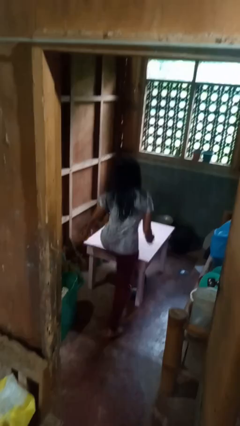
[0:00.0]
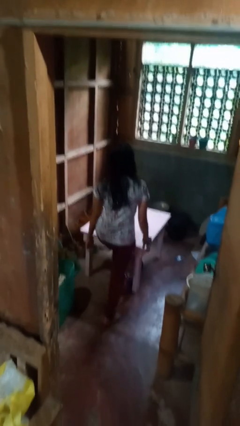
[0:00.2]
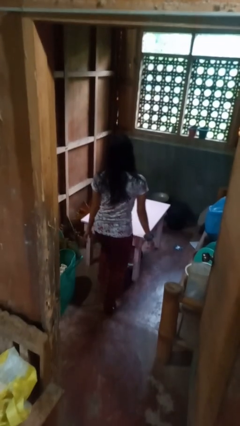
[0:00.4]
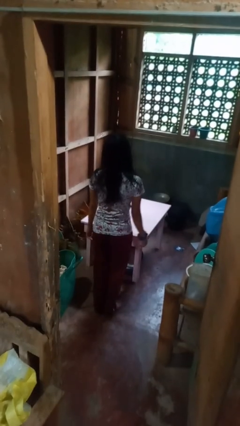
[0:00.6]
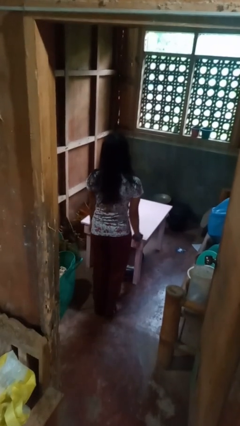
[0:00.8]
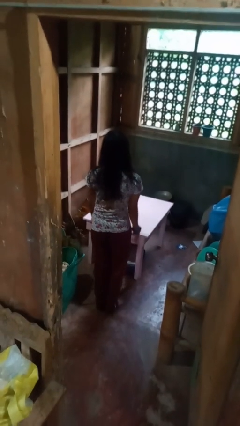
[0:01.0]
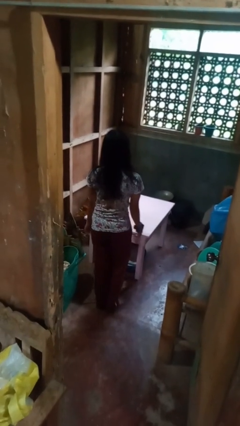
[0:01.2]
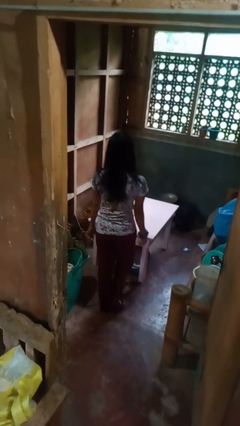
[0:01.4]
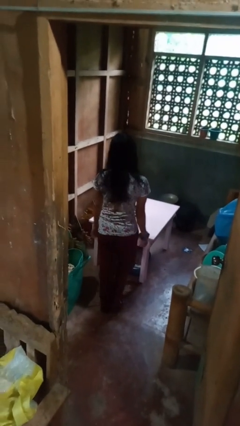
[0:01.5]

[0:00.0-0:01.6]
person climbs off table

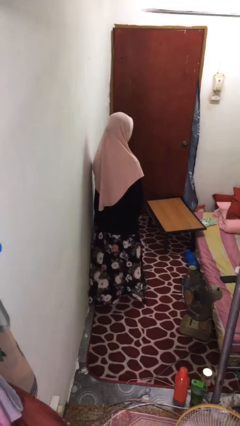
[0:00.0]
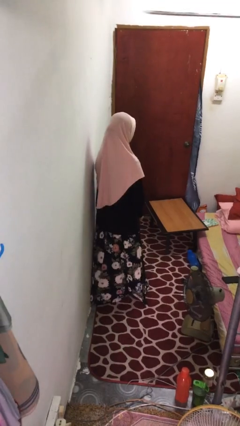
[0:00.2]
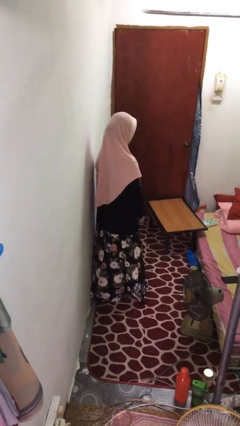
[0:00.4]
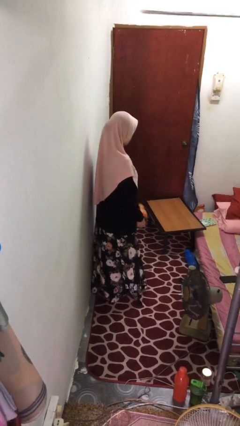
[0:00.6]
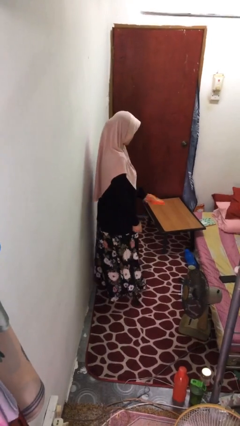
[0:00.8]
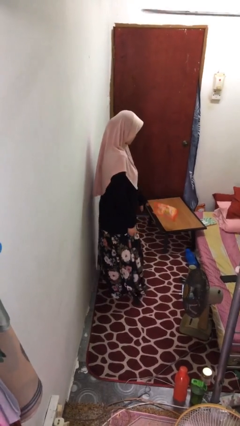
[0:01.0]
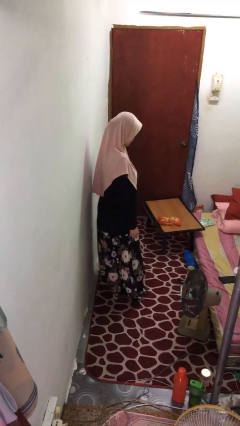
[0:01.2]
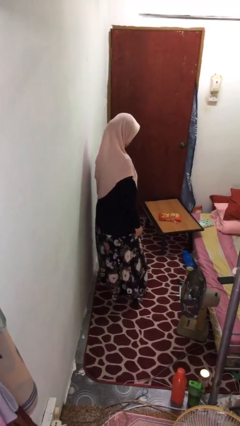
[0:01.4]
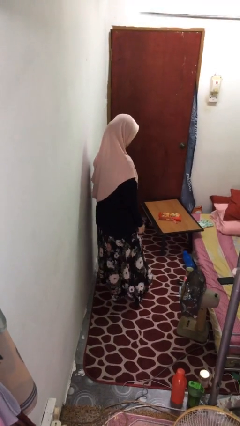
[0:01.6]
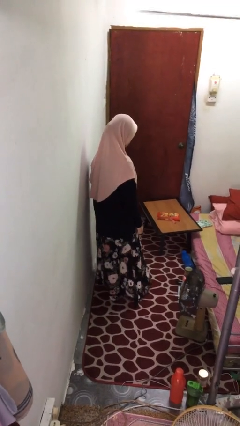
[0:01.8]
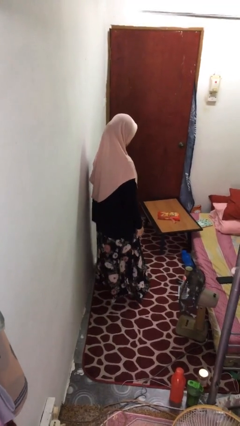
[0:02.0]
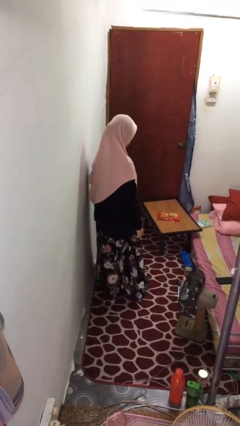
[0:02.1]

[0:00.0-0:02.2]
person throws object on table

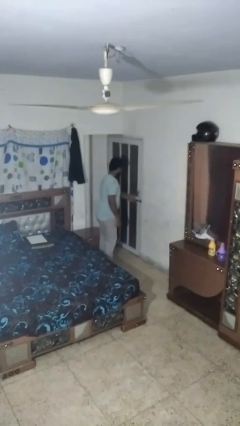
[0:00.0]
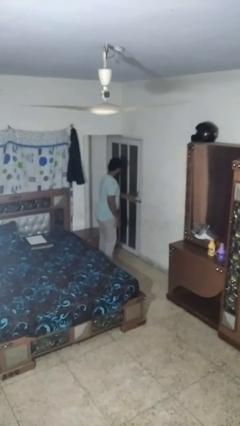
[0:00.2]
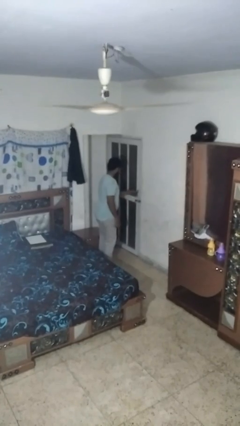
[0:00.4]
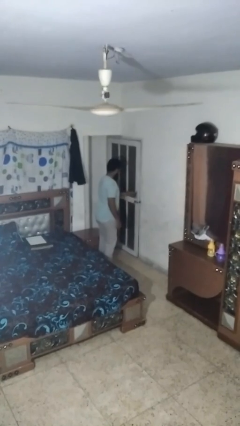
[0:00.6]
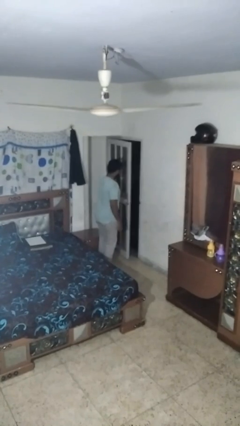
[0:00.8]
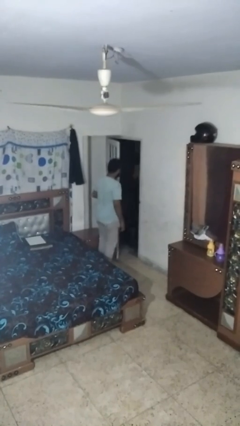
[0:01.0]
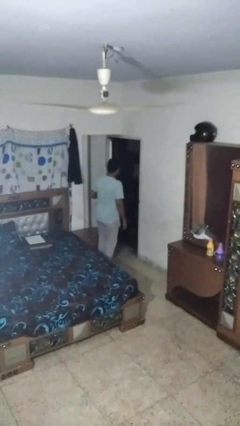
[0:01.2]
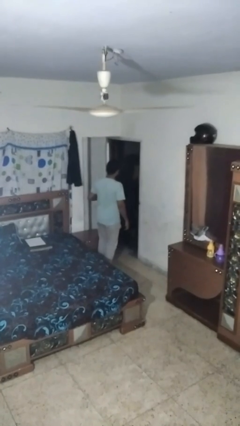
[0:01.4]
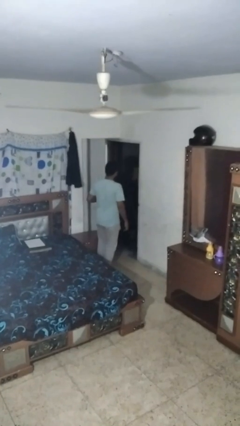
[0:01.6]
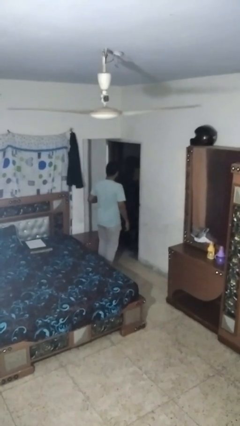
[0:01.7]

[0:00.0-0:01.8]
person opens facility door

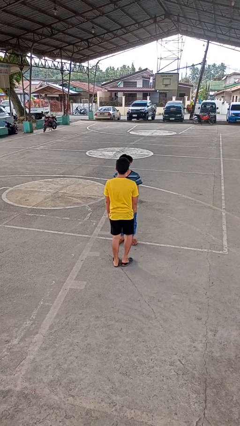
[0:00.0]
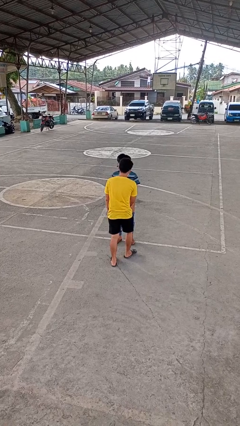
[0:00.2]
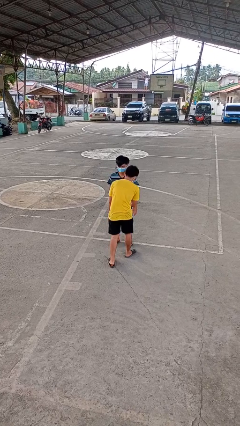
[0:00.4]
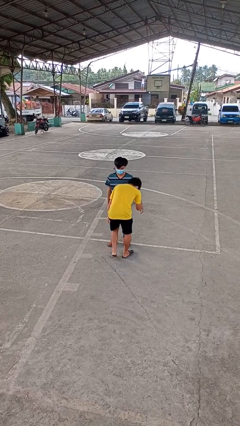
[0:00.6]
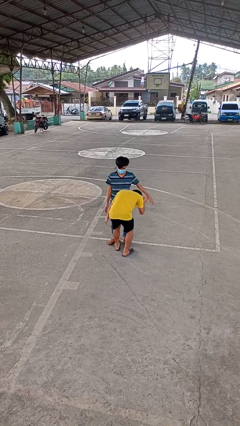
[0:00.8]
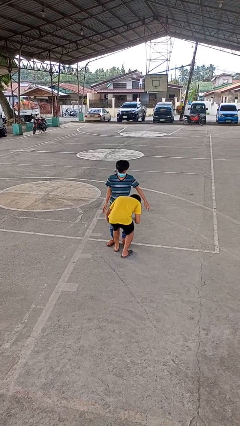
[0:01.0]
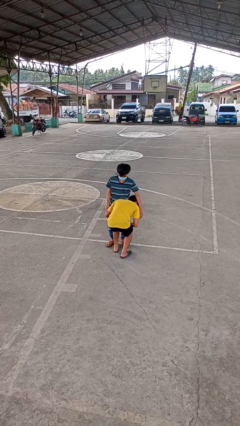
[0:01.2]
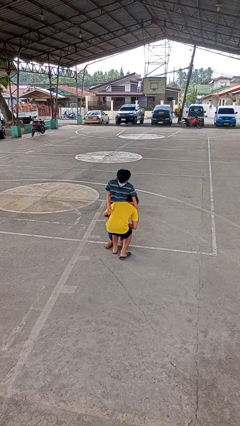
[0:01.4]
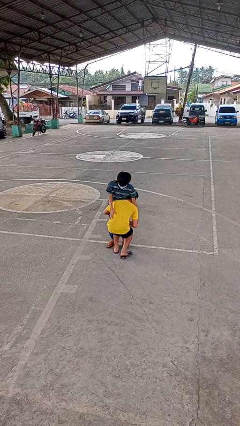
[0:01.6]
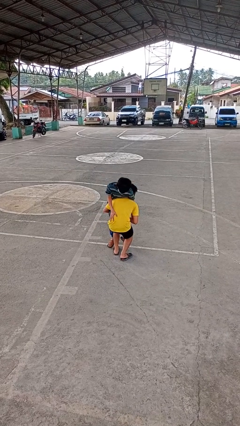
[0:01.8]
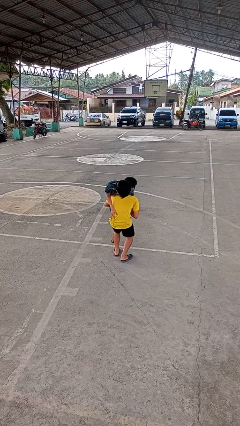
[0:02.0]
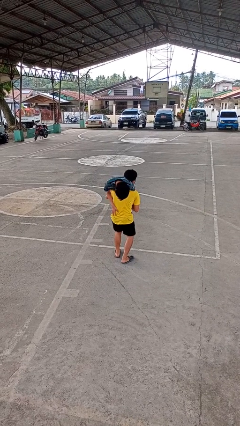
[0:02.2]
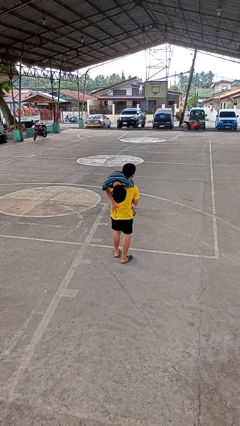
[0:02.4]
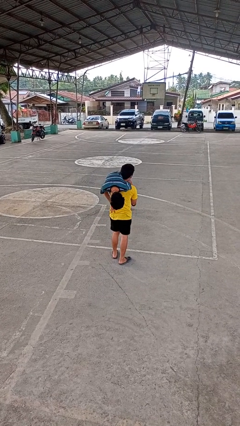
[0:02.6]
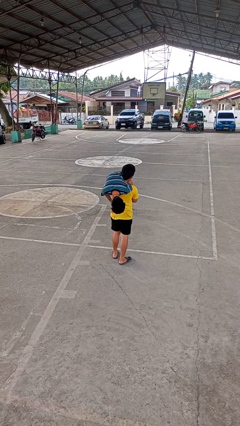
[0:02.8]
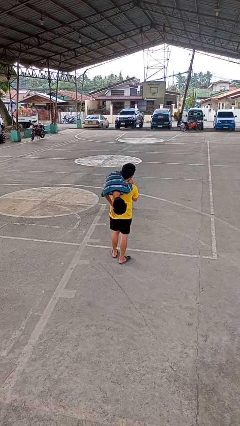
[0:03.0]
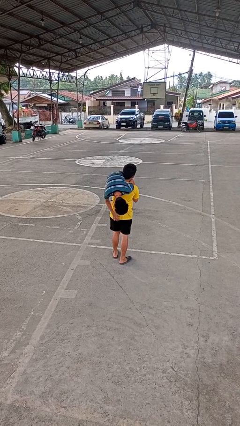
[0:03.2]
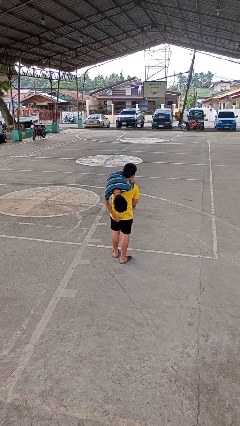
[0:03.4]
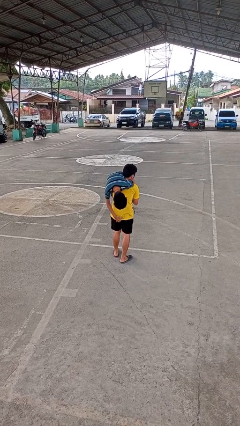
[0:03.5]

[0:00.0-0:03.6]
person carries person over shoulder

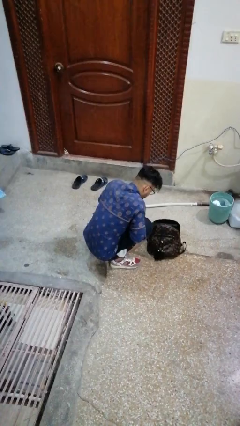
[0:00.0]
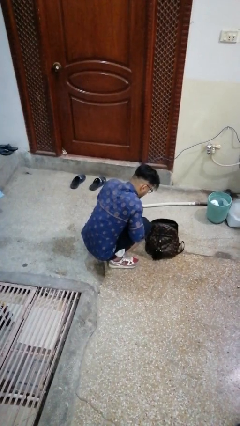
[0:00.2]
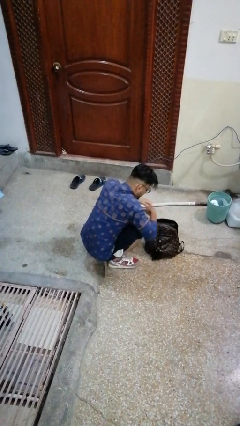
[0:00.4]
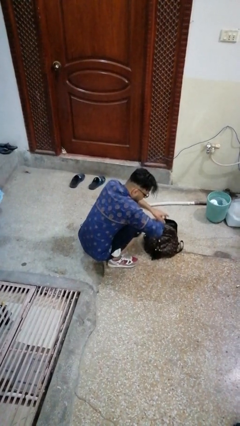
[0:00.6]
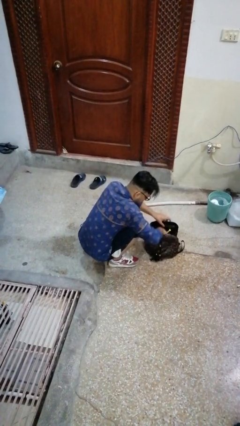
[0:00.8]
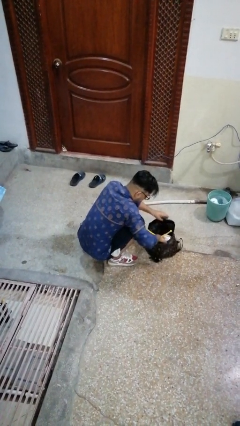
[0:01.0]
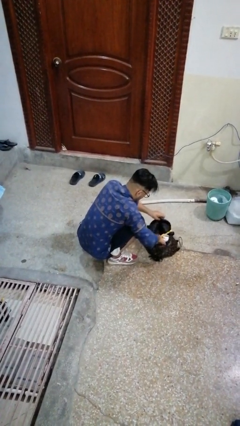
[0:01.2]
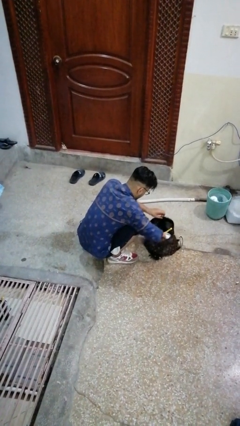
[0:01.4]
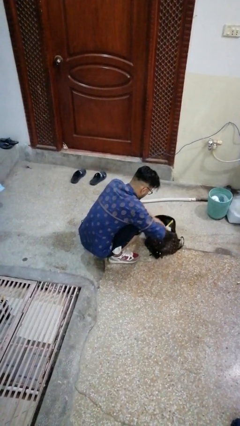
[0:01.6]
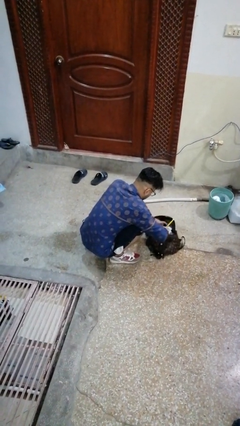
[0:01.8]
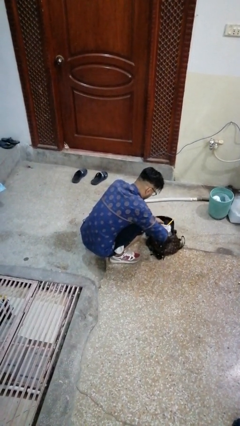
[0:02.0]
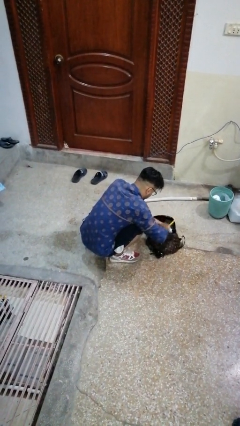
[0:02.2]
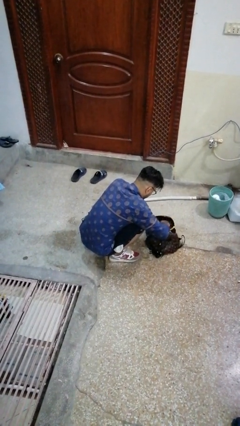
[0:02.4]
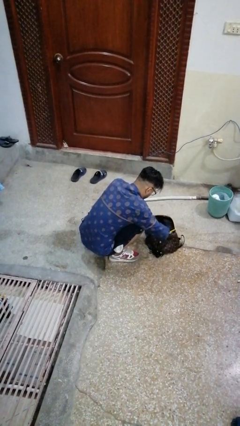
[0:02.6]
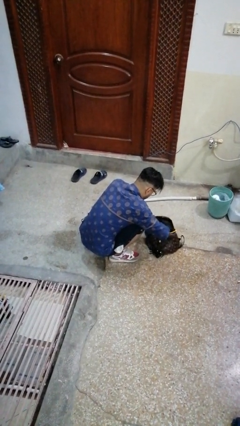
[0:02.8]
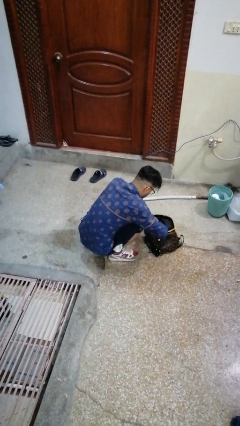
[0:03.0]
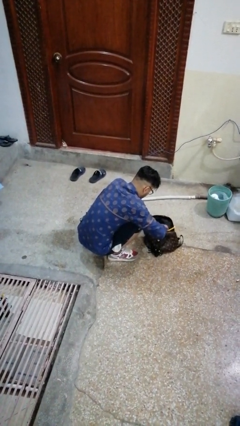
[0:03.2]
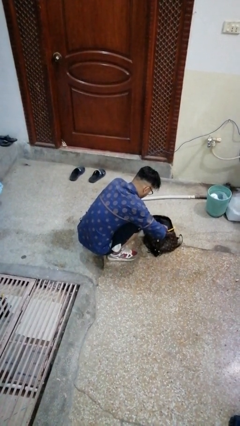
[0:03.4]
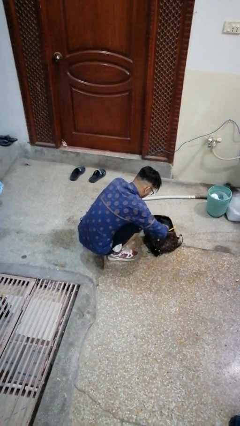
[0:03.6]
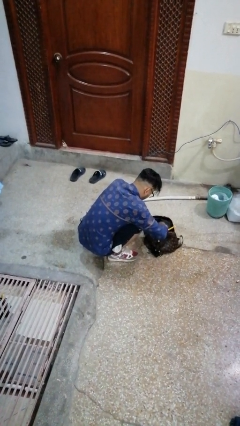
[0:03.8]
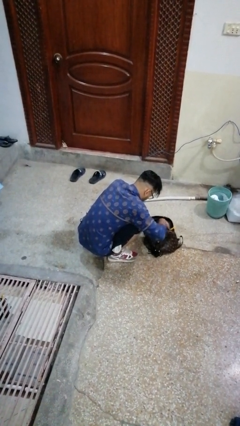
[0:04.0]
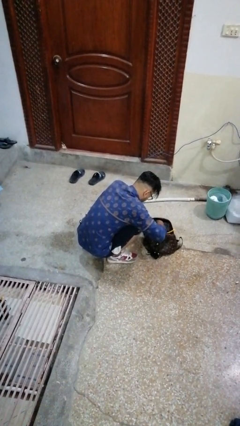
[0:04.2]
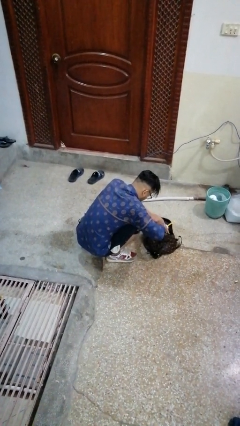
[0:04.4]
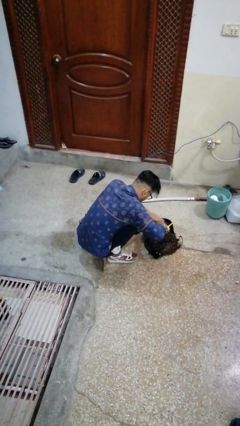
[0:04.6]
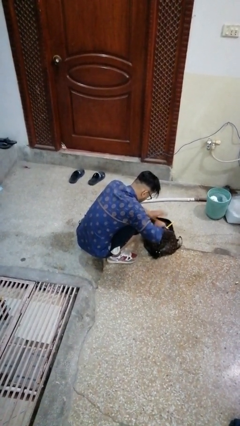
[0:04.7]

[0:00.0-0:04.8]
person searches in bag

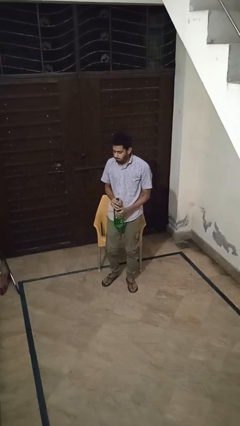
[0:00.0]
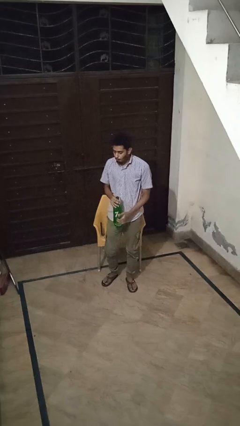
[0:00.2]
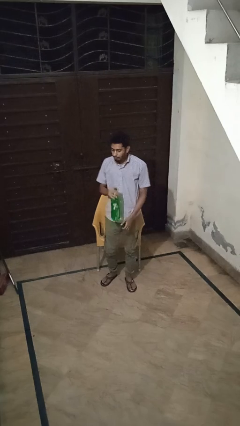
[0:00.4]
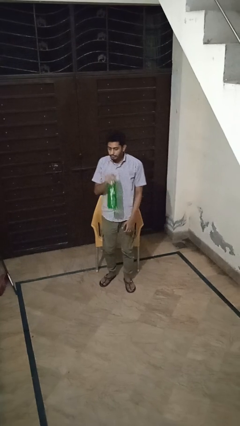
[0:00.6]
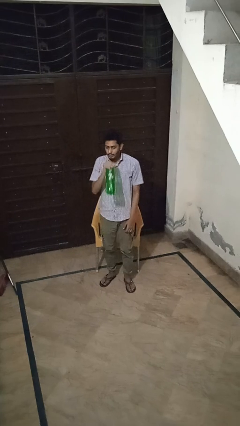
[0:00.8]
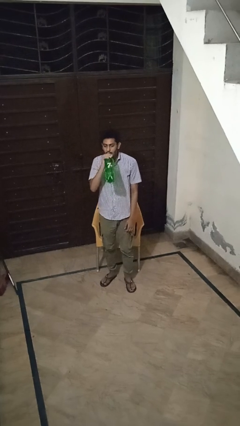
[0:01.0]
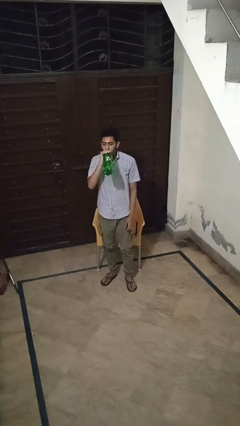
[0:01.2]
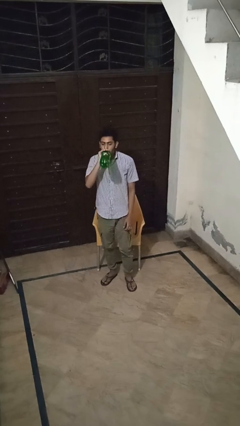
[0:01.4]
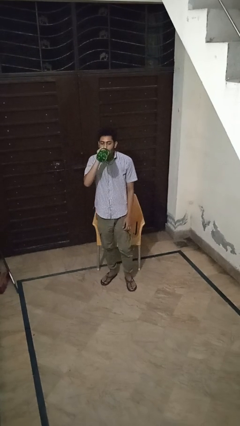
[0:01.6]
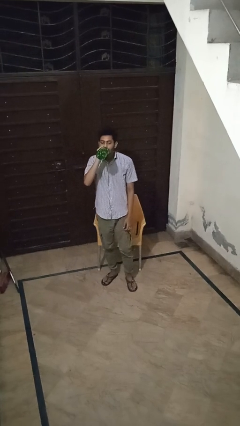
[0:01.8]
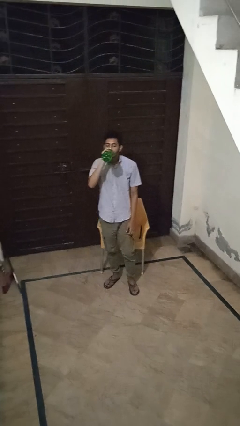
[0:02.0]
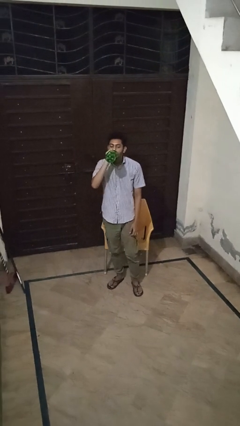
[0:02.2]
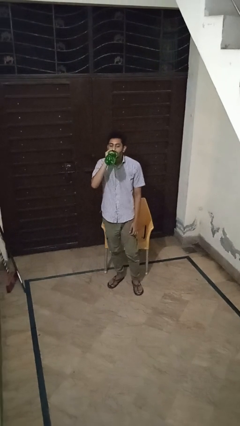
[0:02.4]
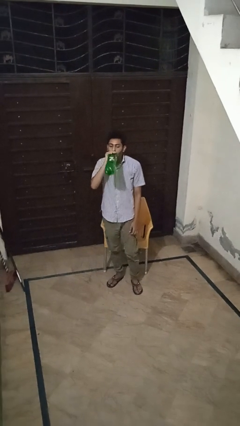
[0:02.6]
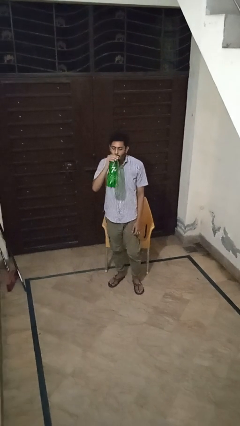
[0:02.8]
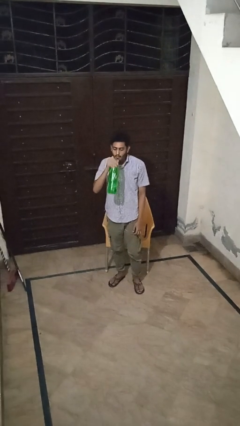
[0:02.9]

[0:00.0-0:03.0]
person drinks from bottle

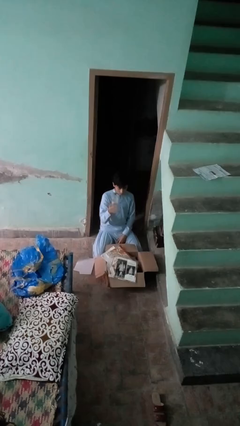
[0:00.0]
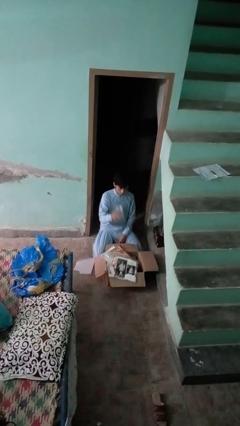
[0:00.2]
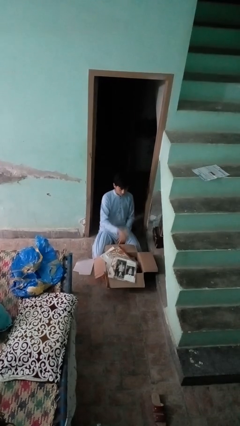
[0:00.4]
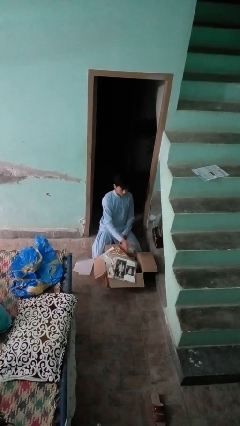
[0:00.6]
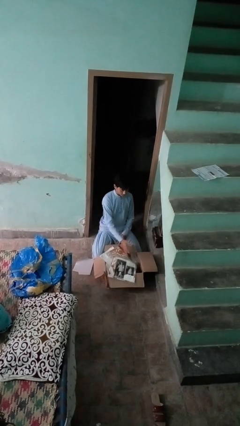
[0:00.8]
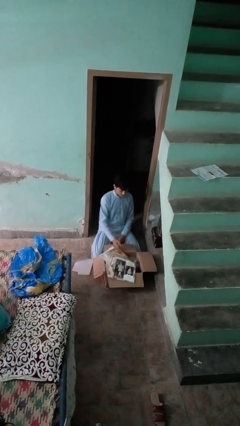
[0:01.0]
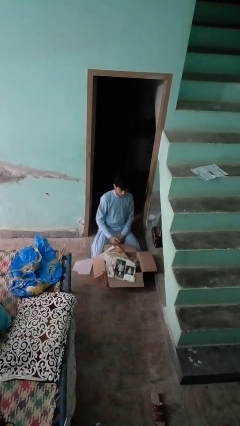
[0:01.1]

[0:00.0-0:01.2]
person puts object into box
